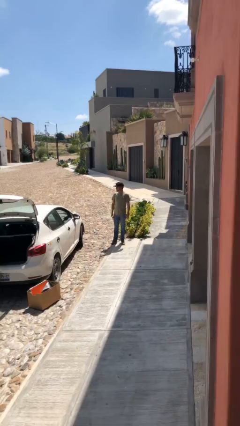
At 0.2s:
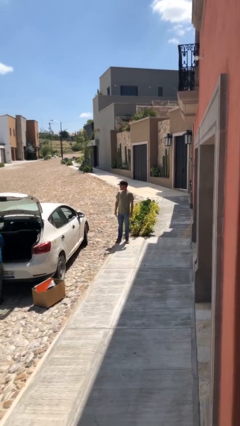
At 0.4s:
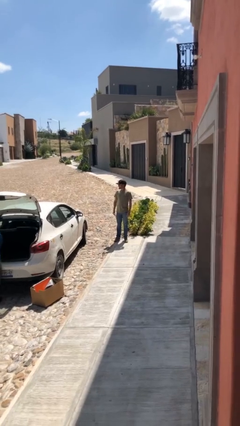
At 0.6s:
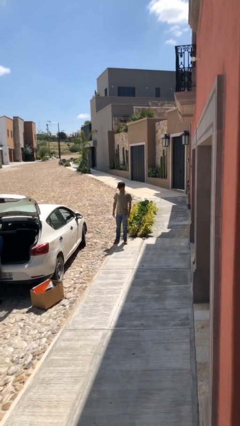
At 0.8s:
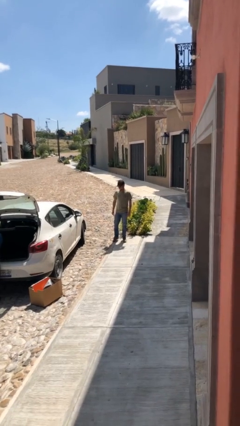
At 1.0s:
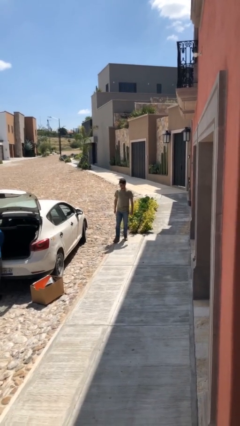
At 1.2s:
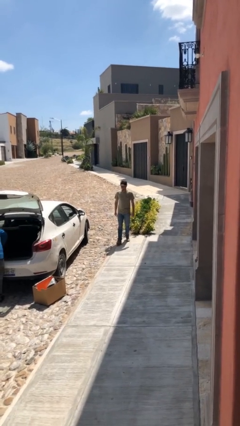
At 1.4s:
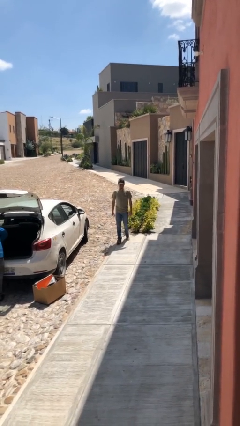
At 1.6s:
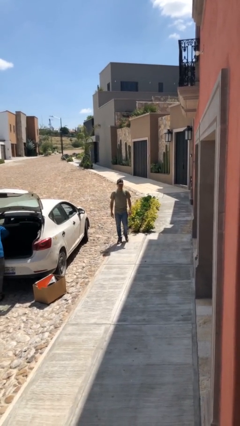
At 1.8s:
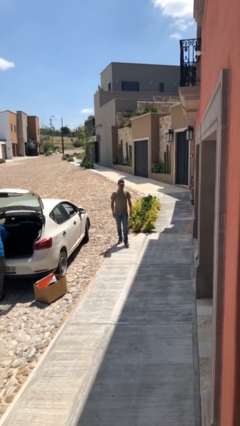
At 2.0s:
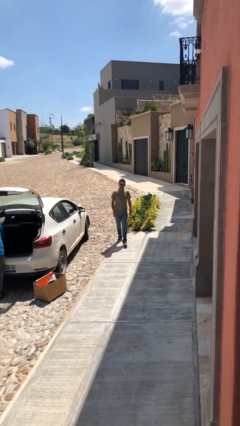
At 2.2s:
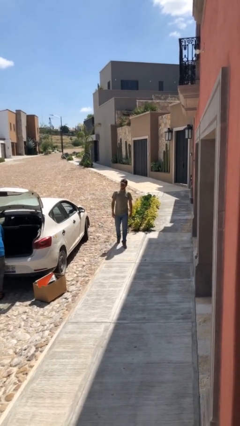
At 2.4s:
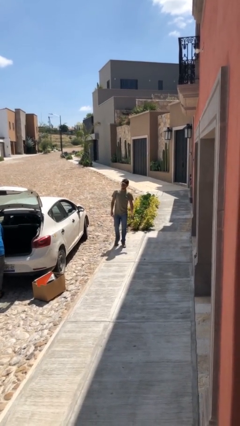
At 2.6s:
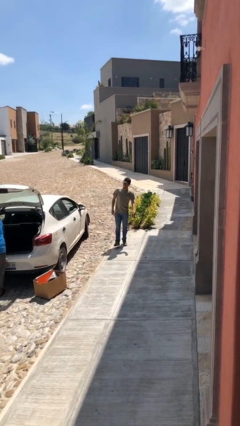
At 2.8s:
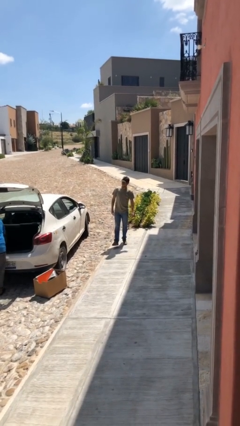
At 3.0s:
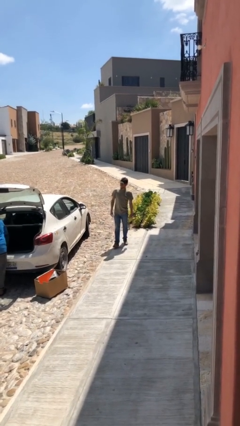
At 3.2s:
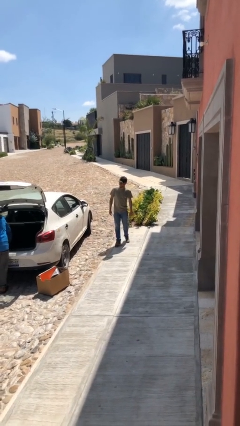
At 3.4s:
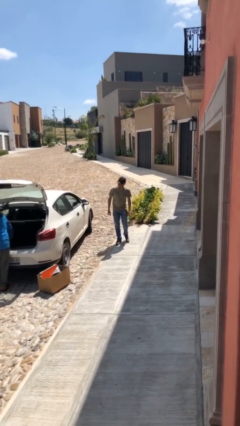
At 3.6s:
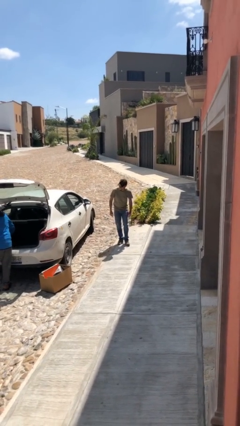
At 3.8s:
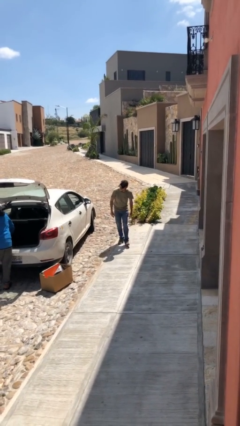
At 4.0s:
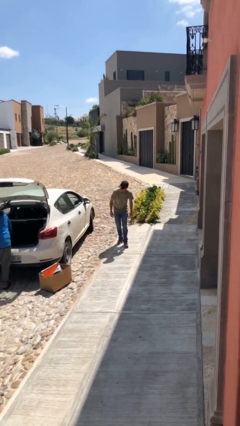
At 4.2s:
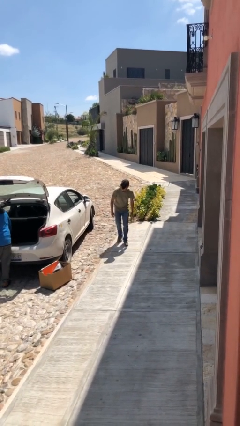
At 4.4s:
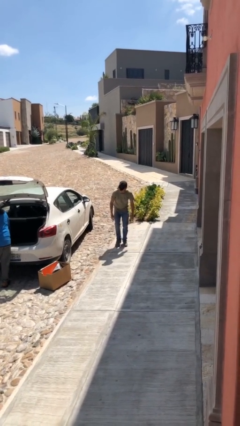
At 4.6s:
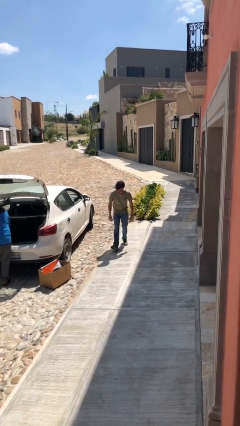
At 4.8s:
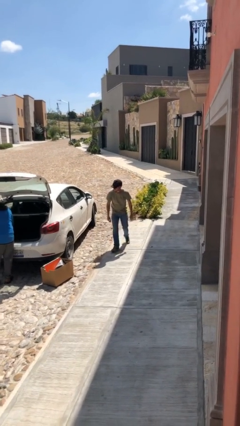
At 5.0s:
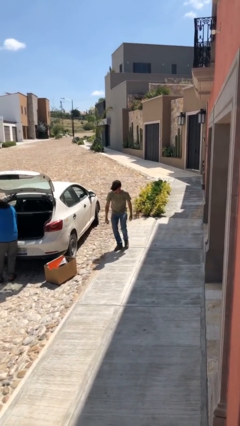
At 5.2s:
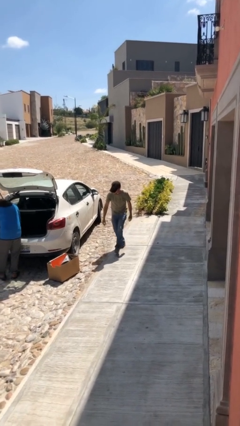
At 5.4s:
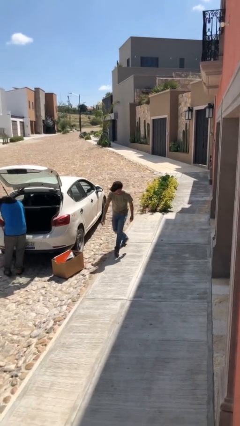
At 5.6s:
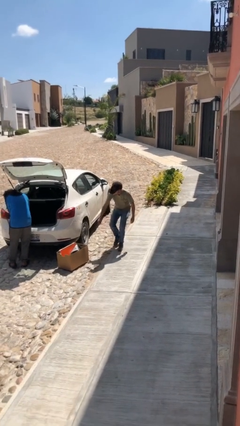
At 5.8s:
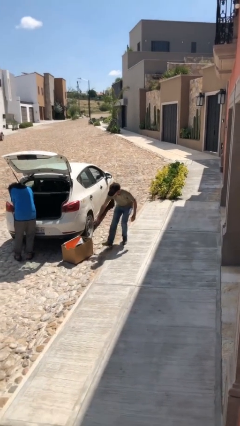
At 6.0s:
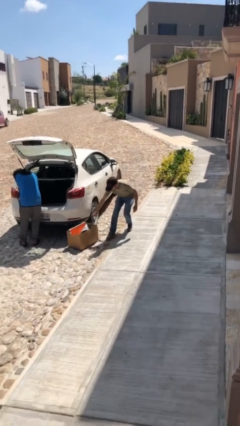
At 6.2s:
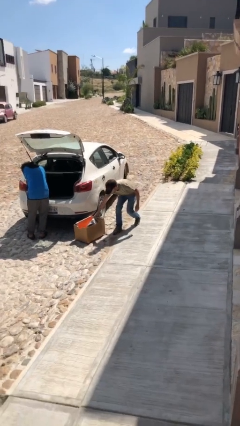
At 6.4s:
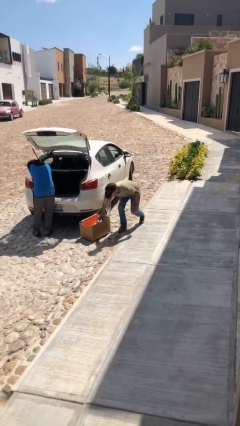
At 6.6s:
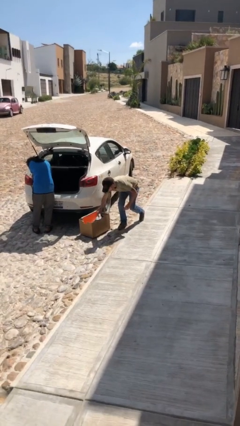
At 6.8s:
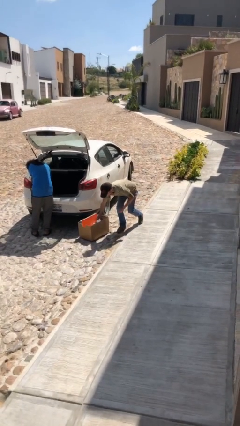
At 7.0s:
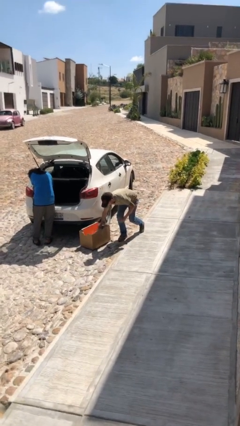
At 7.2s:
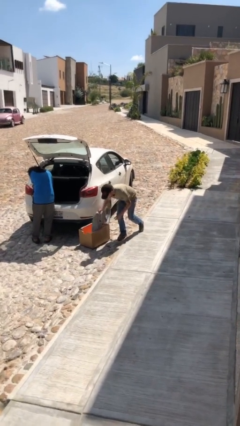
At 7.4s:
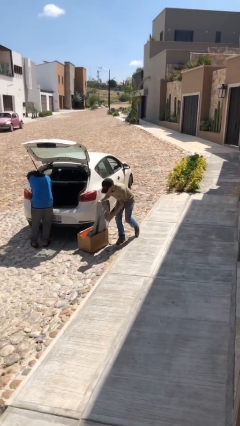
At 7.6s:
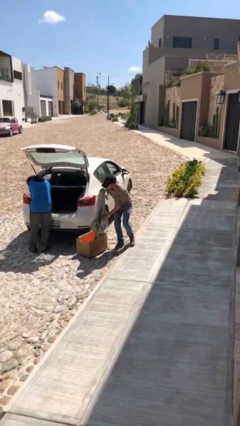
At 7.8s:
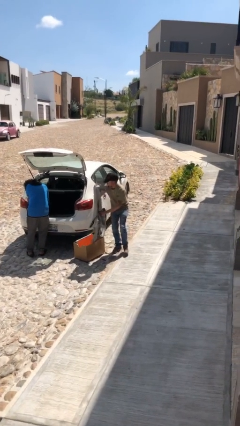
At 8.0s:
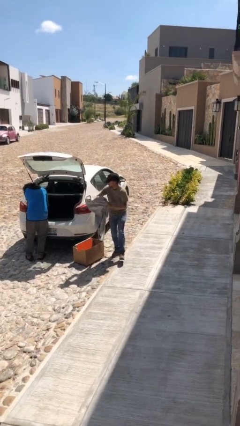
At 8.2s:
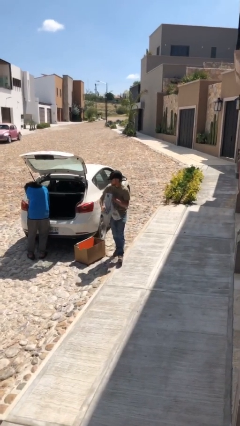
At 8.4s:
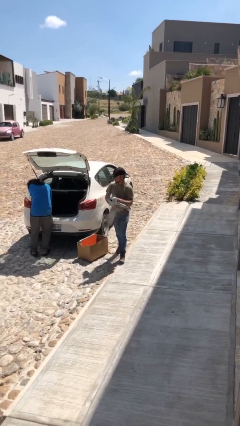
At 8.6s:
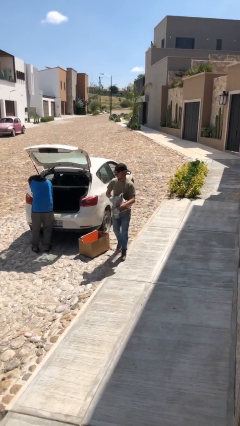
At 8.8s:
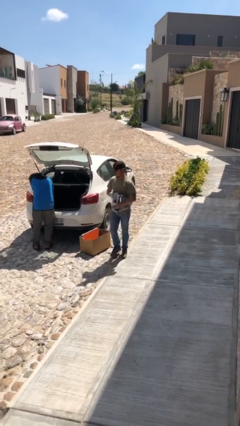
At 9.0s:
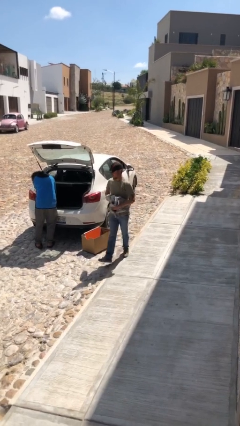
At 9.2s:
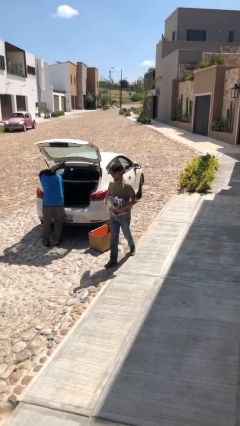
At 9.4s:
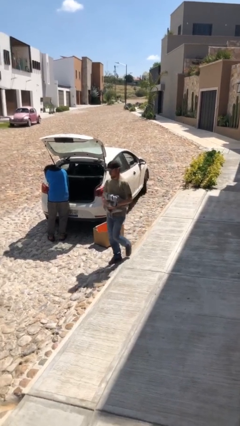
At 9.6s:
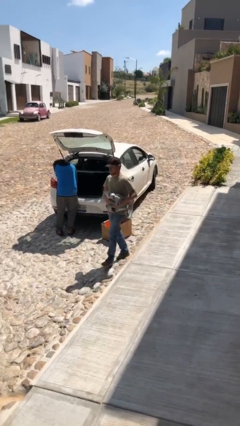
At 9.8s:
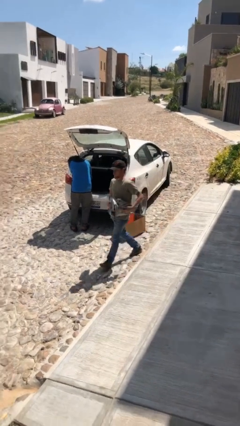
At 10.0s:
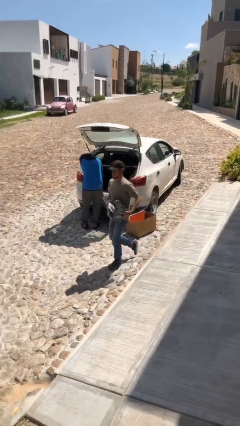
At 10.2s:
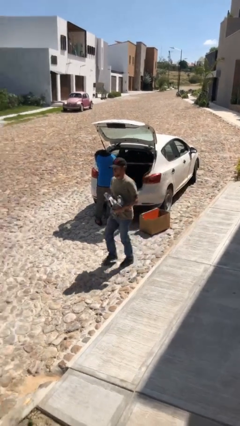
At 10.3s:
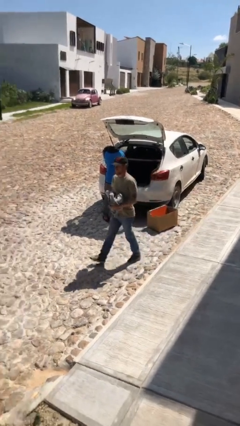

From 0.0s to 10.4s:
person steals object from person

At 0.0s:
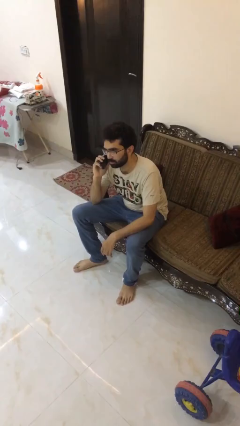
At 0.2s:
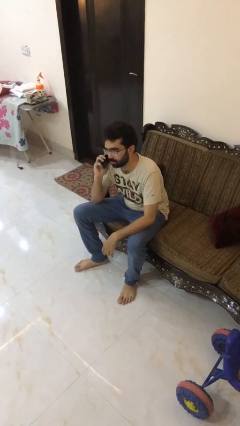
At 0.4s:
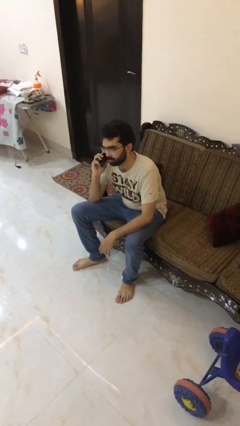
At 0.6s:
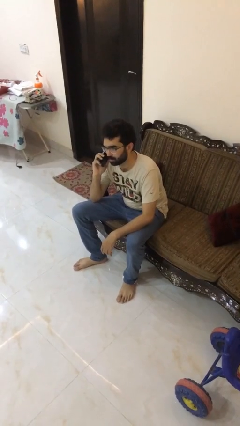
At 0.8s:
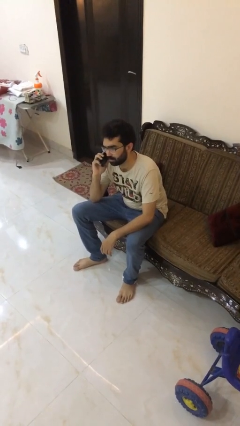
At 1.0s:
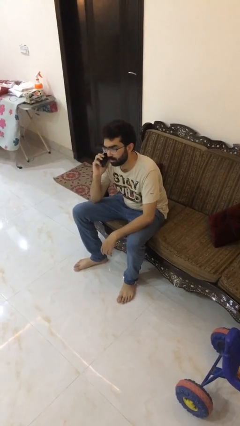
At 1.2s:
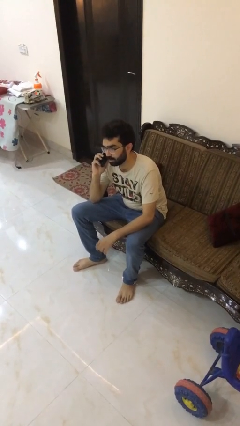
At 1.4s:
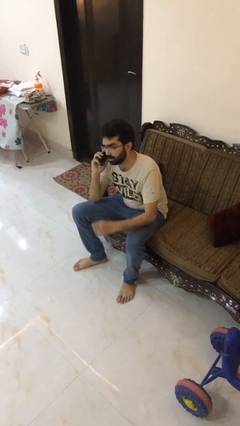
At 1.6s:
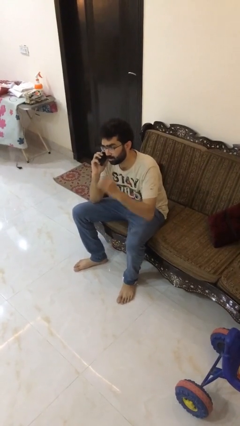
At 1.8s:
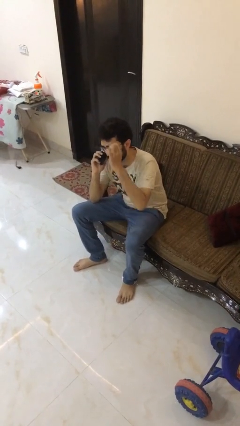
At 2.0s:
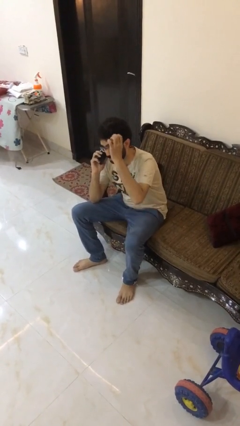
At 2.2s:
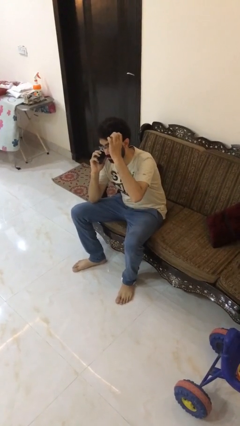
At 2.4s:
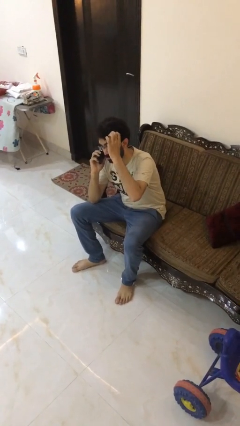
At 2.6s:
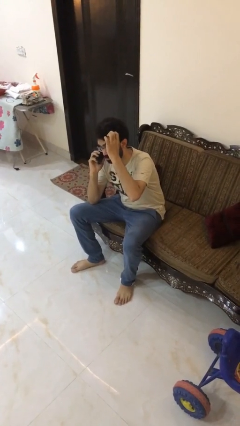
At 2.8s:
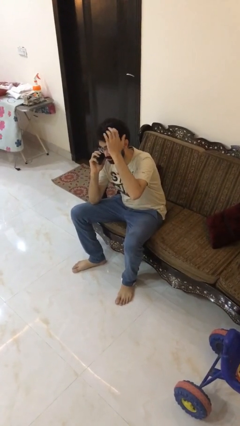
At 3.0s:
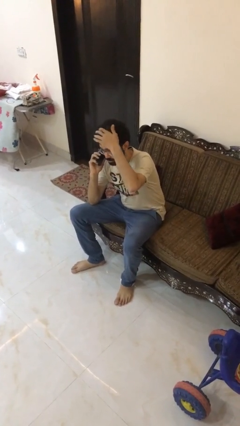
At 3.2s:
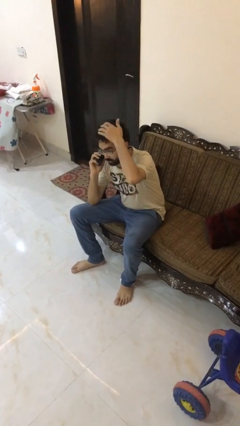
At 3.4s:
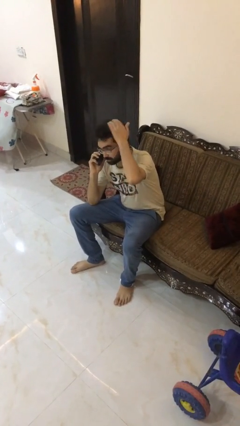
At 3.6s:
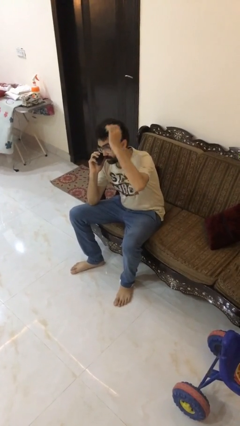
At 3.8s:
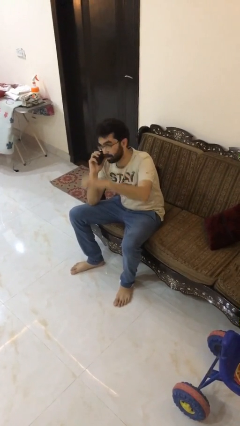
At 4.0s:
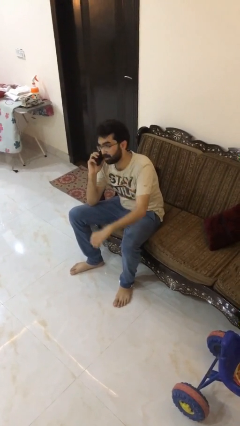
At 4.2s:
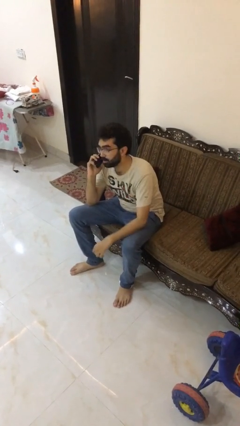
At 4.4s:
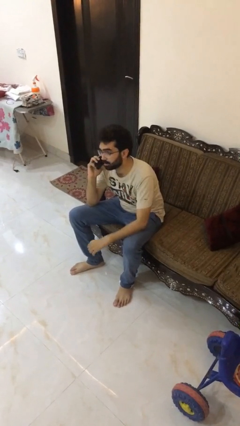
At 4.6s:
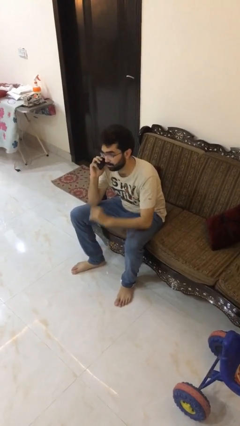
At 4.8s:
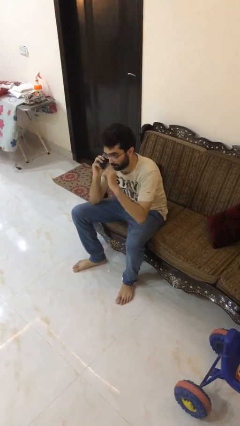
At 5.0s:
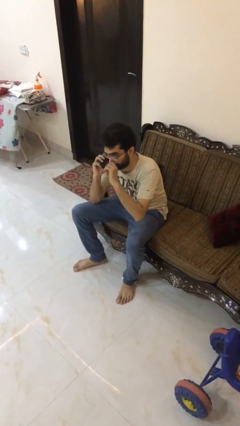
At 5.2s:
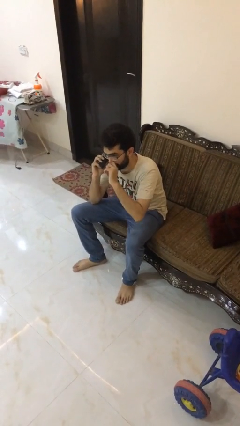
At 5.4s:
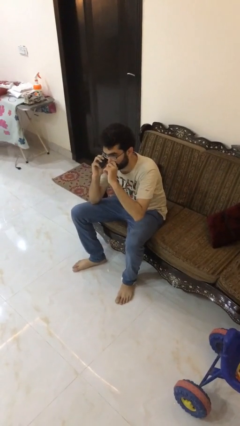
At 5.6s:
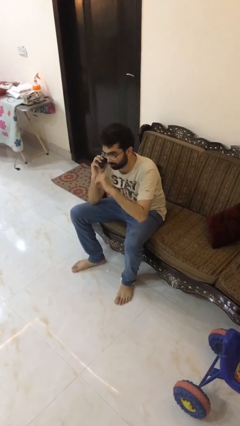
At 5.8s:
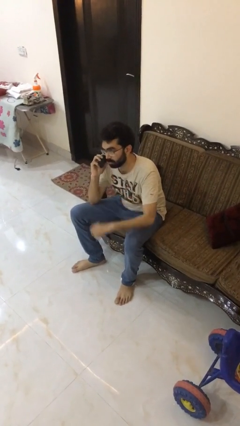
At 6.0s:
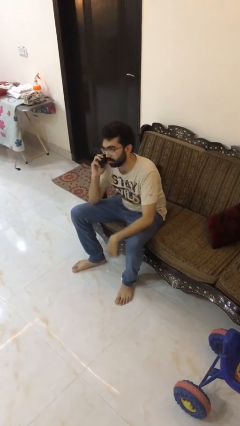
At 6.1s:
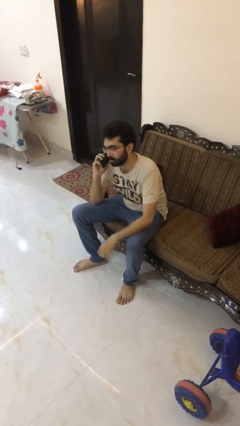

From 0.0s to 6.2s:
person talks on phone

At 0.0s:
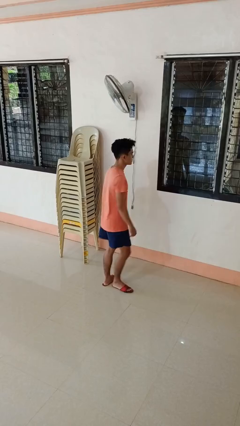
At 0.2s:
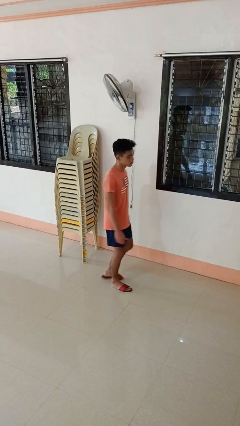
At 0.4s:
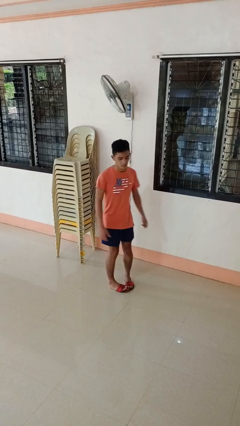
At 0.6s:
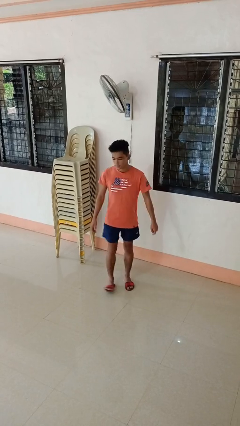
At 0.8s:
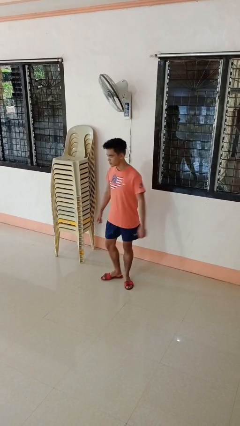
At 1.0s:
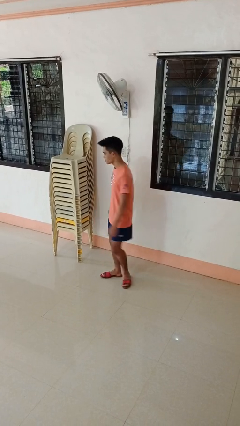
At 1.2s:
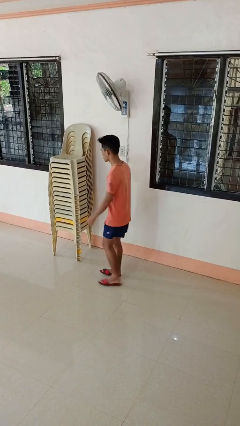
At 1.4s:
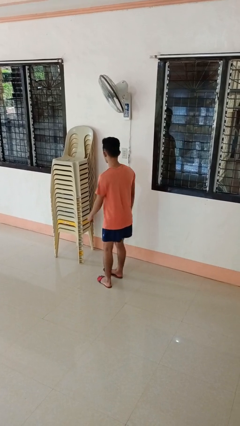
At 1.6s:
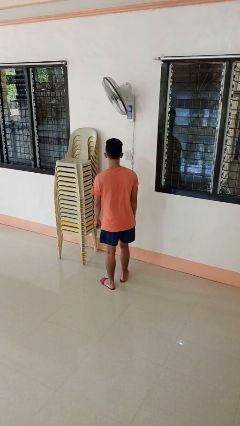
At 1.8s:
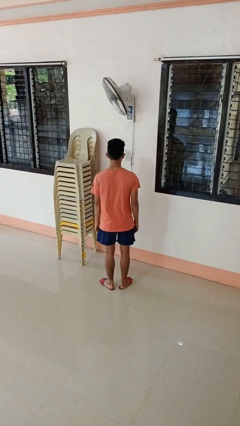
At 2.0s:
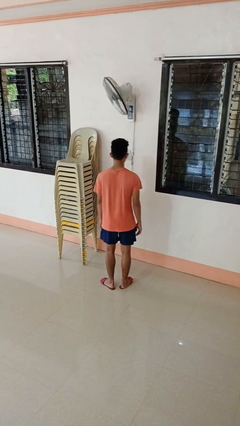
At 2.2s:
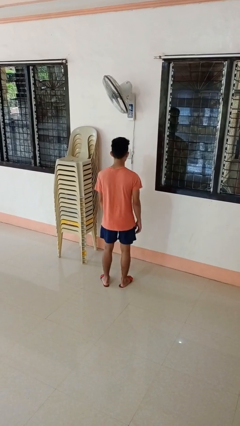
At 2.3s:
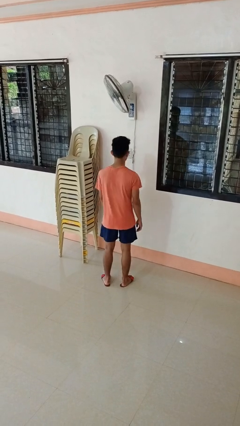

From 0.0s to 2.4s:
person twirls
